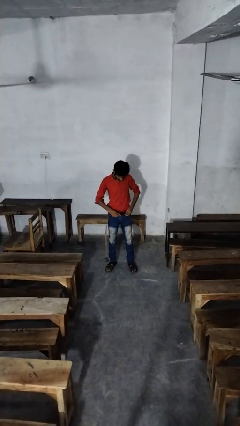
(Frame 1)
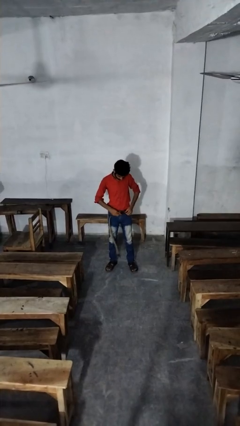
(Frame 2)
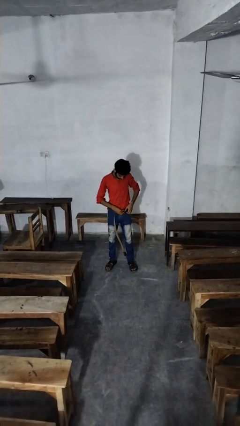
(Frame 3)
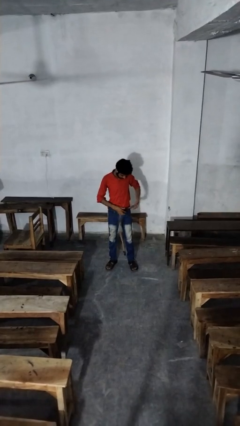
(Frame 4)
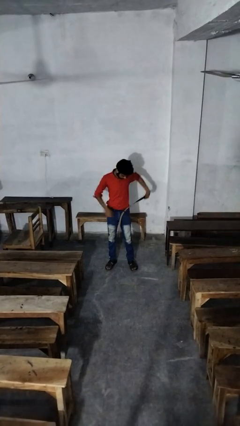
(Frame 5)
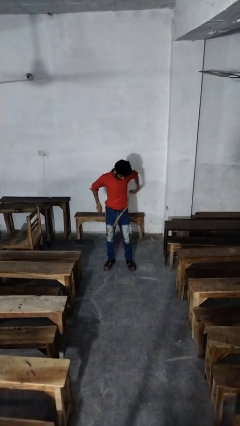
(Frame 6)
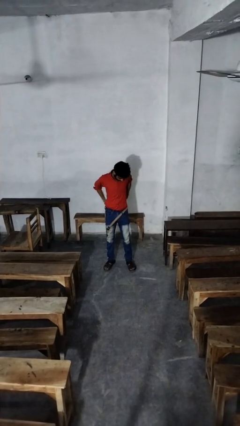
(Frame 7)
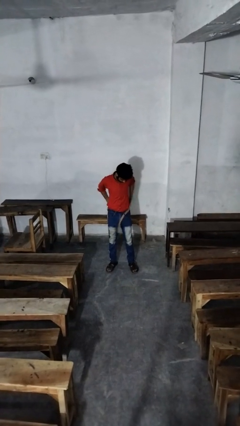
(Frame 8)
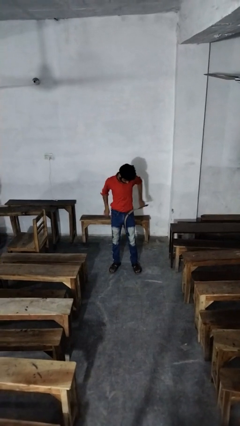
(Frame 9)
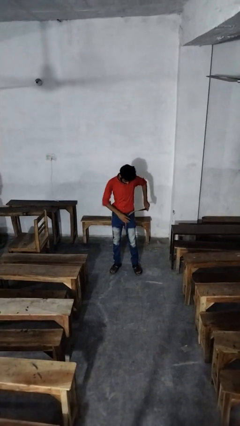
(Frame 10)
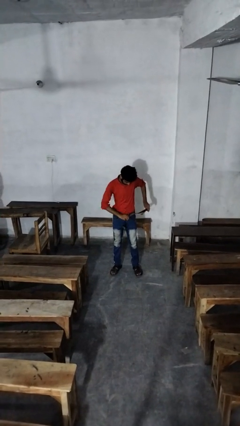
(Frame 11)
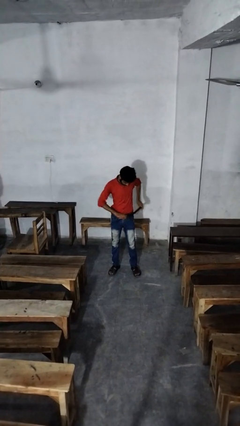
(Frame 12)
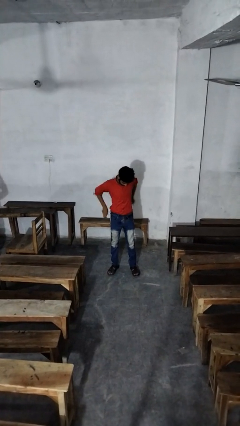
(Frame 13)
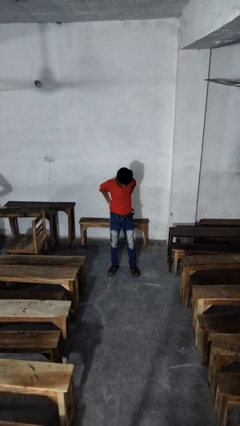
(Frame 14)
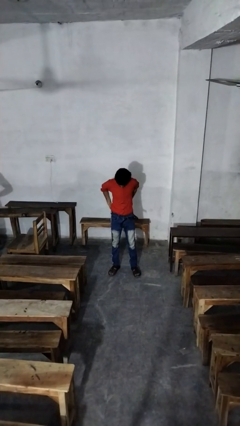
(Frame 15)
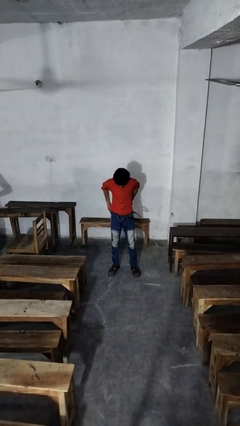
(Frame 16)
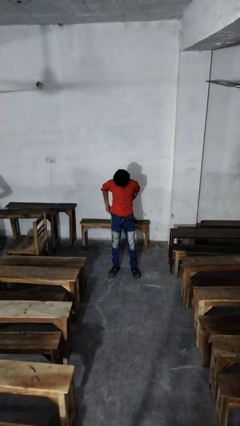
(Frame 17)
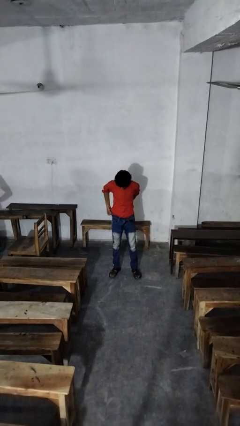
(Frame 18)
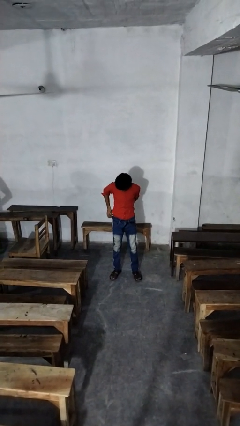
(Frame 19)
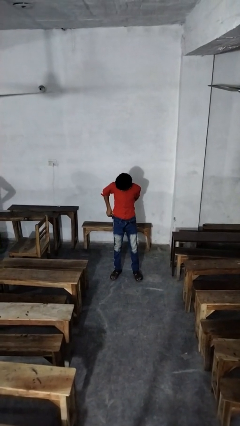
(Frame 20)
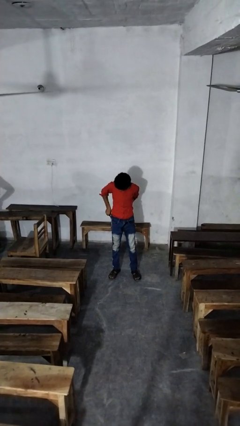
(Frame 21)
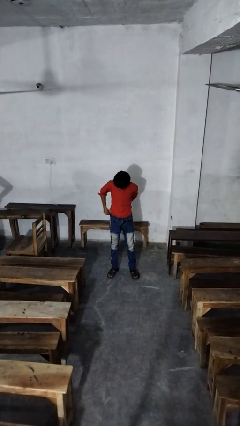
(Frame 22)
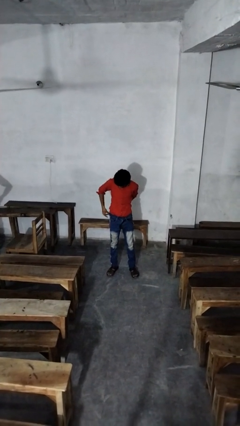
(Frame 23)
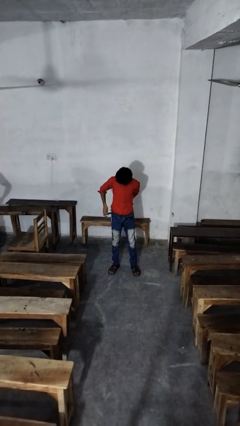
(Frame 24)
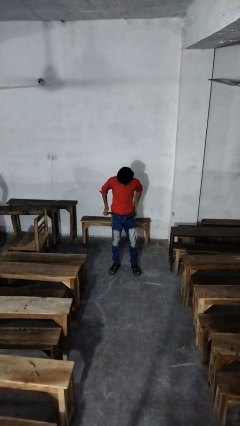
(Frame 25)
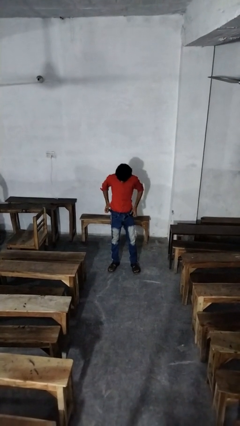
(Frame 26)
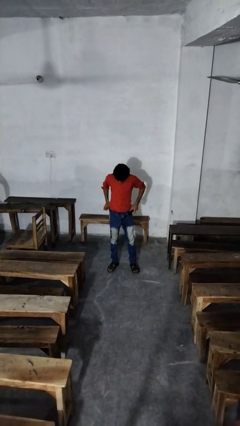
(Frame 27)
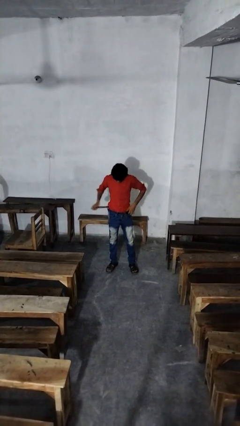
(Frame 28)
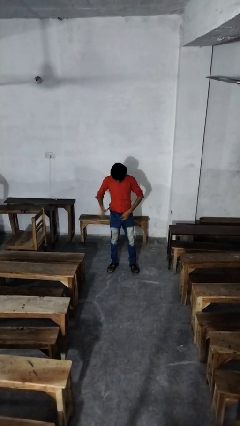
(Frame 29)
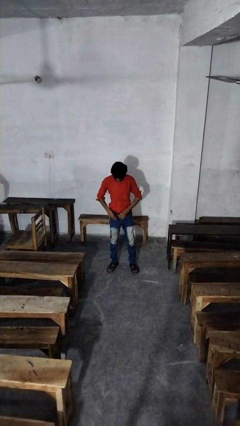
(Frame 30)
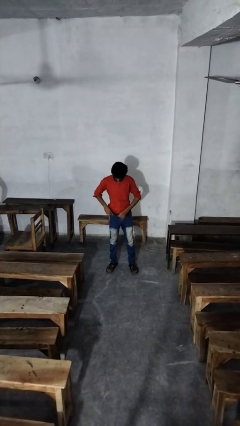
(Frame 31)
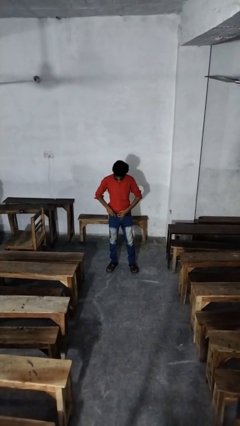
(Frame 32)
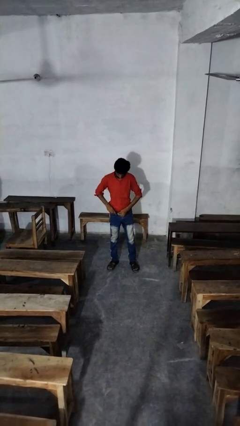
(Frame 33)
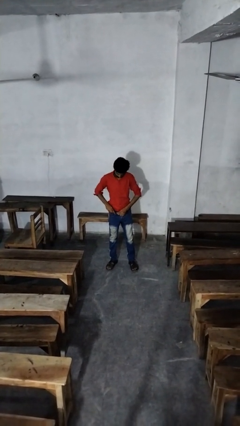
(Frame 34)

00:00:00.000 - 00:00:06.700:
person puts on belt

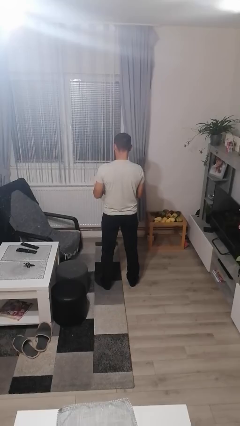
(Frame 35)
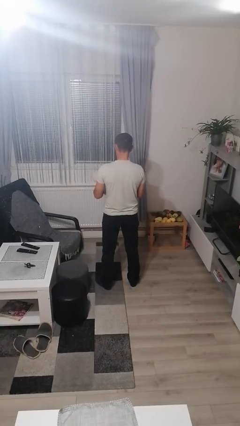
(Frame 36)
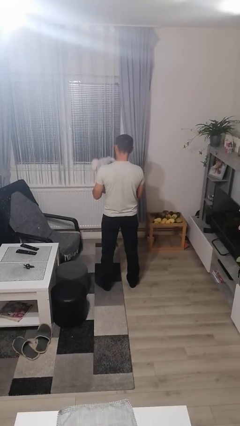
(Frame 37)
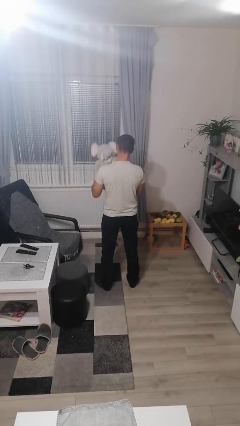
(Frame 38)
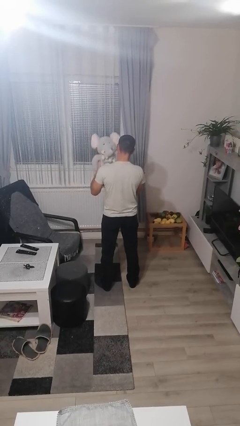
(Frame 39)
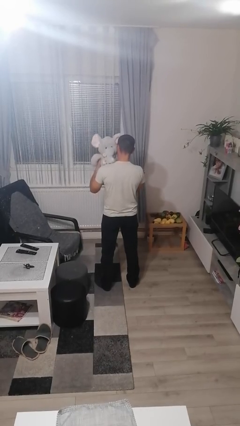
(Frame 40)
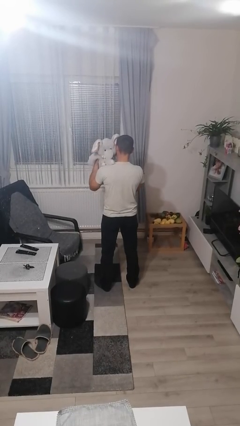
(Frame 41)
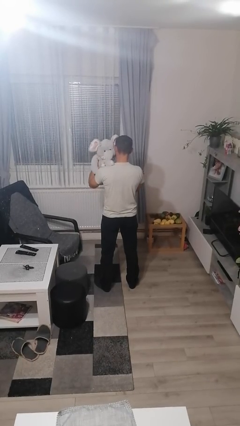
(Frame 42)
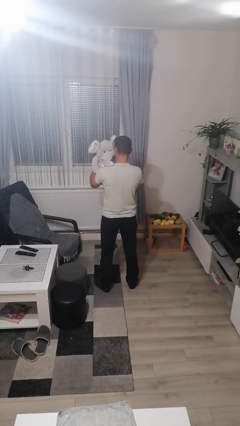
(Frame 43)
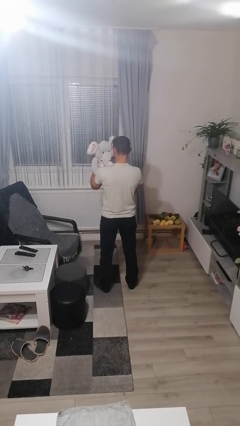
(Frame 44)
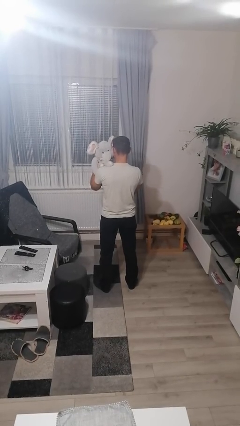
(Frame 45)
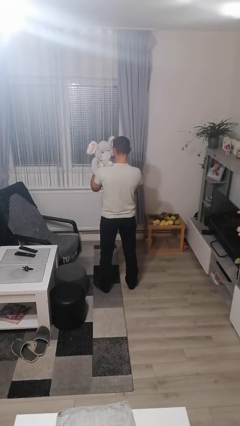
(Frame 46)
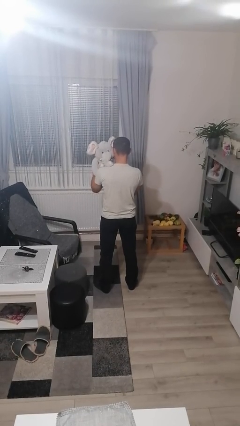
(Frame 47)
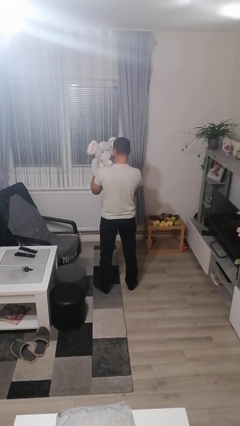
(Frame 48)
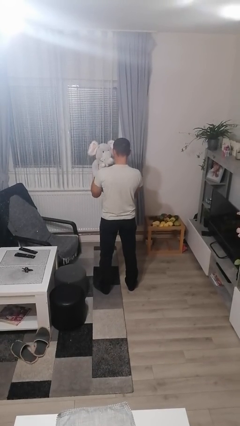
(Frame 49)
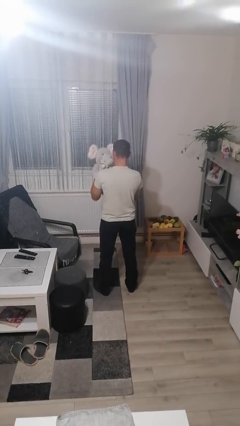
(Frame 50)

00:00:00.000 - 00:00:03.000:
person hugs stuffed animal

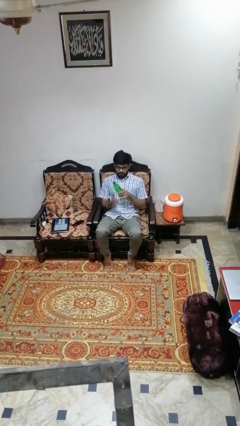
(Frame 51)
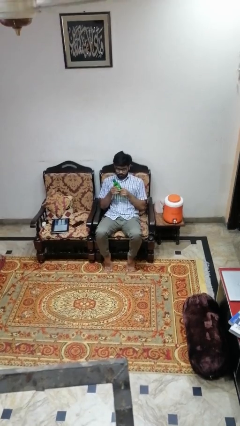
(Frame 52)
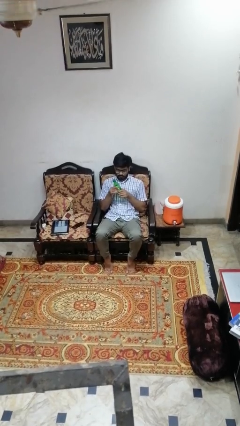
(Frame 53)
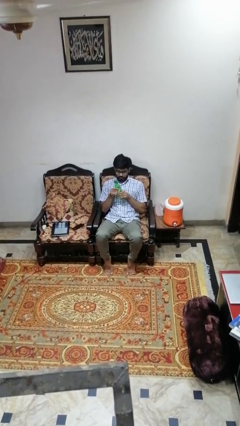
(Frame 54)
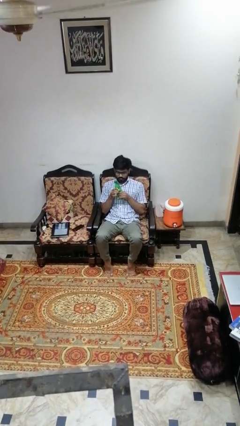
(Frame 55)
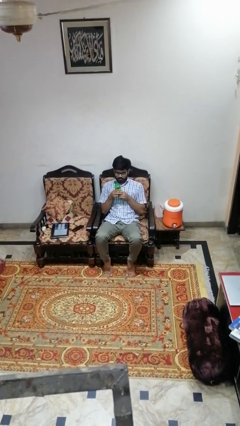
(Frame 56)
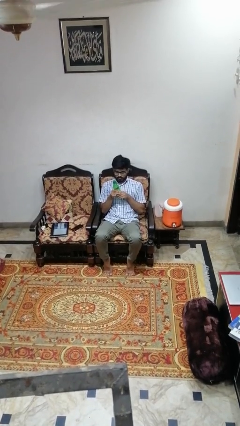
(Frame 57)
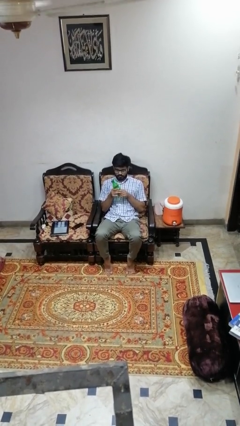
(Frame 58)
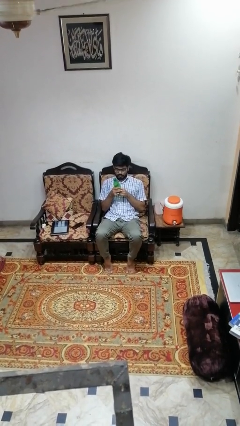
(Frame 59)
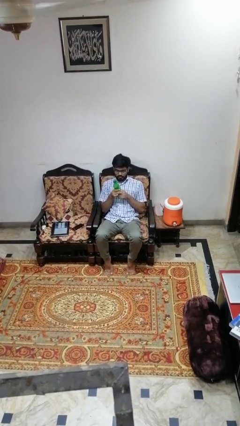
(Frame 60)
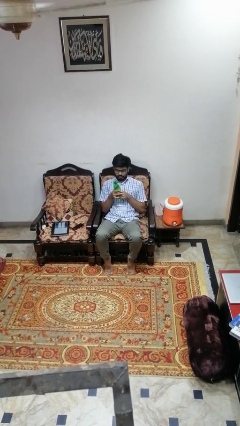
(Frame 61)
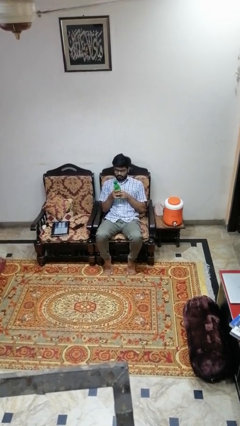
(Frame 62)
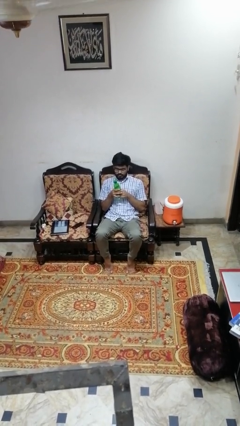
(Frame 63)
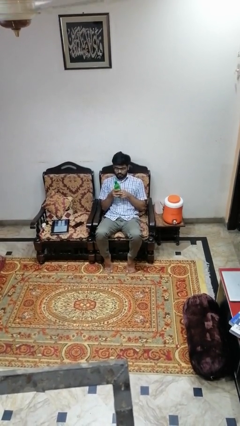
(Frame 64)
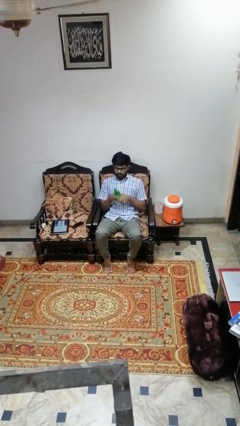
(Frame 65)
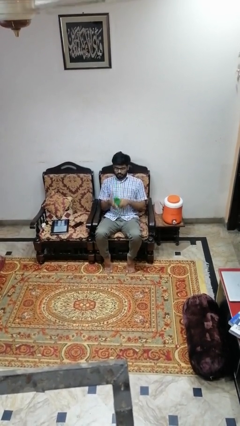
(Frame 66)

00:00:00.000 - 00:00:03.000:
person squeezes object

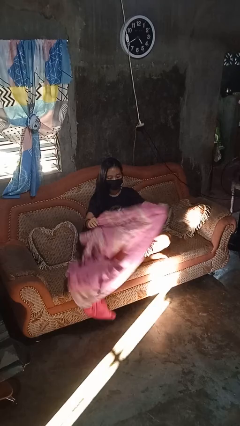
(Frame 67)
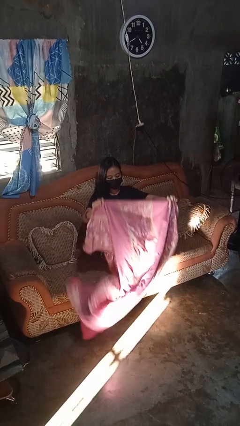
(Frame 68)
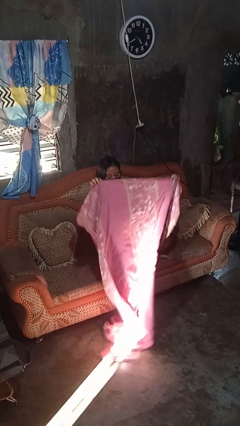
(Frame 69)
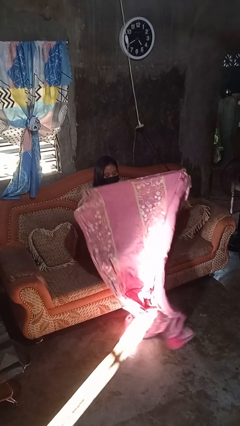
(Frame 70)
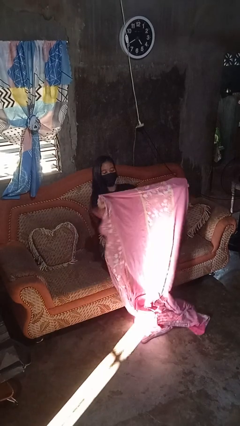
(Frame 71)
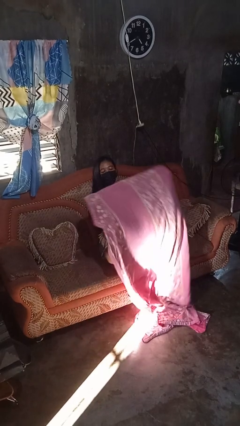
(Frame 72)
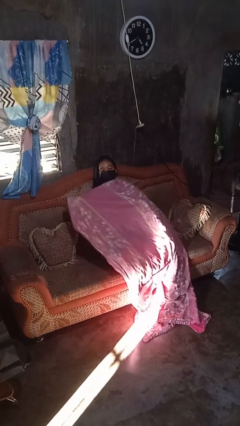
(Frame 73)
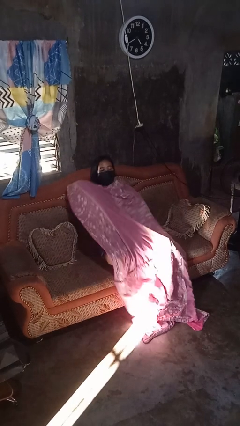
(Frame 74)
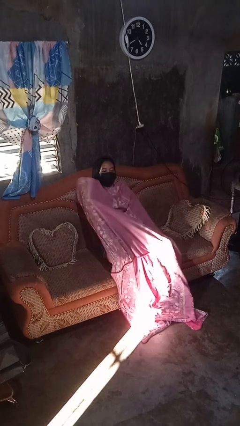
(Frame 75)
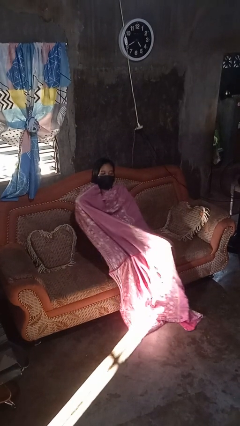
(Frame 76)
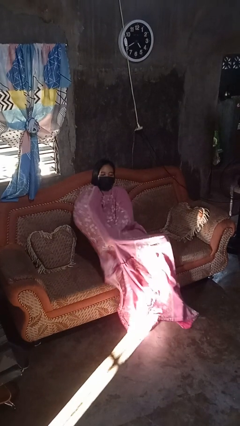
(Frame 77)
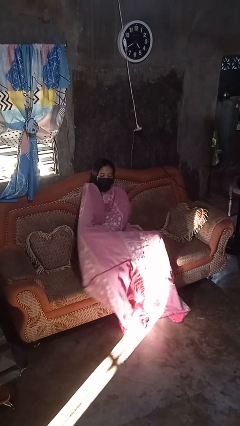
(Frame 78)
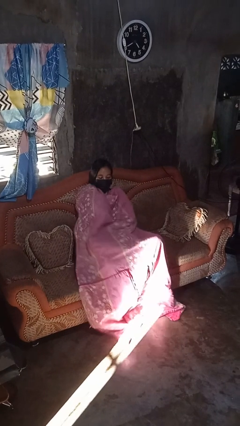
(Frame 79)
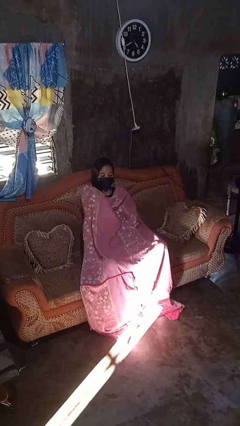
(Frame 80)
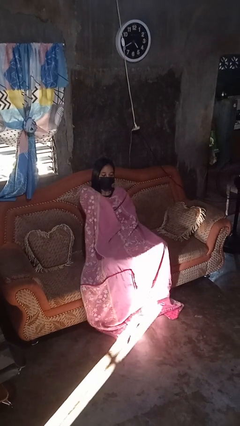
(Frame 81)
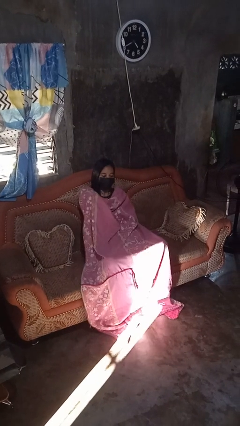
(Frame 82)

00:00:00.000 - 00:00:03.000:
person covers with blanket

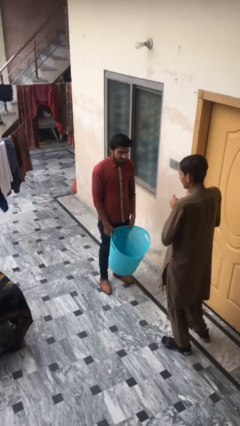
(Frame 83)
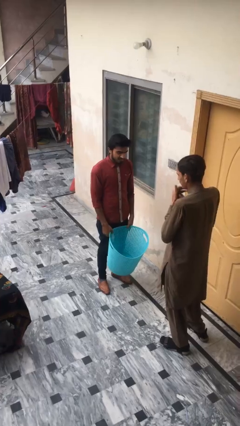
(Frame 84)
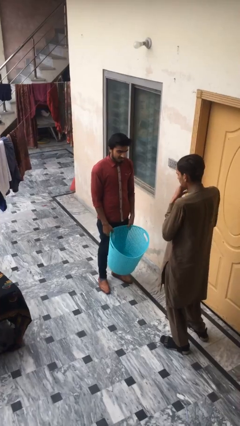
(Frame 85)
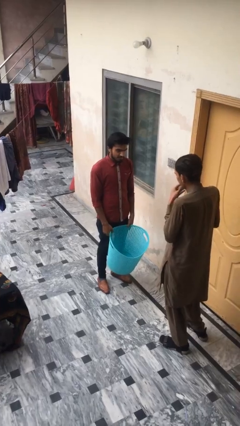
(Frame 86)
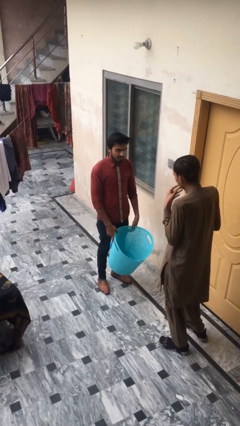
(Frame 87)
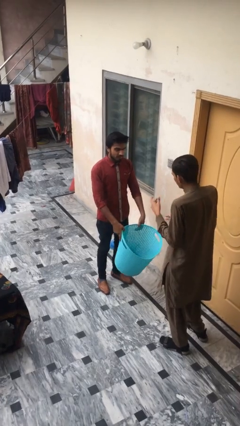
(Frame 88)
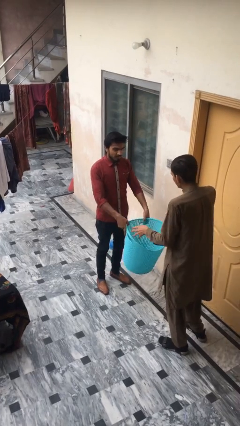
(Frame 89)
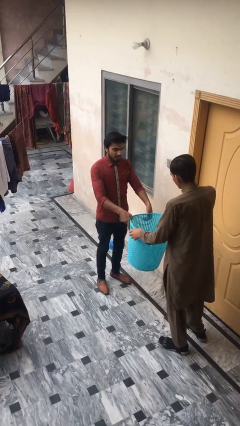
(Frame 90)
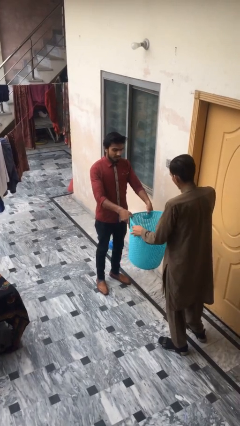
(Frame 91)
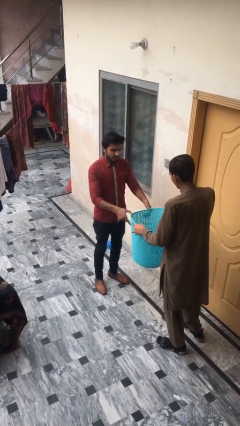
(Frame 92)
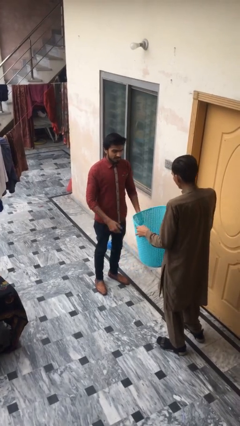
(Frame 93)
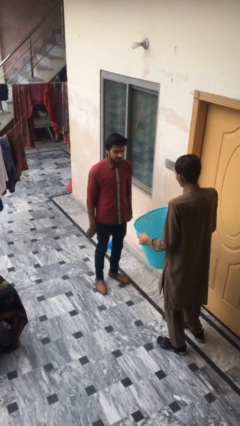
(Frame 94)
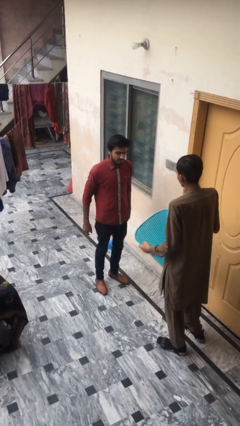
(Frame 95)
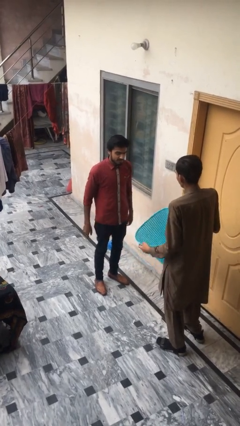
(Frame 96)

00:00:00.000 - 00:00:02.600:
person transfers object to person
